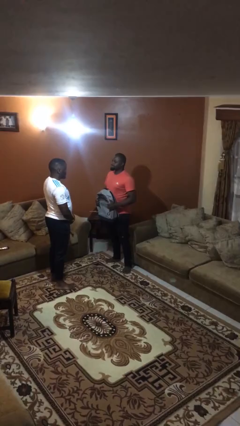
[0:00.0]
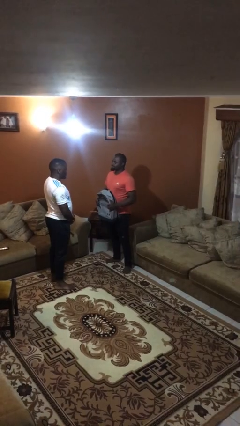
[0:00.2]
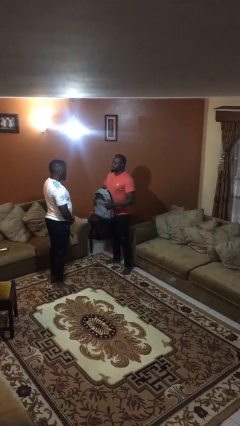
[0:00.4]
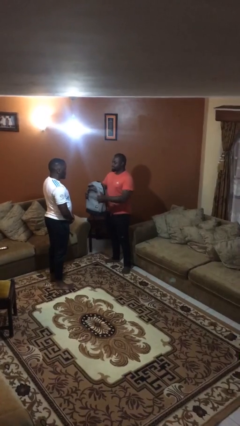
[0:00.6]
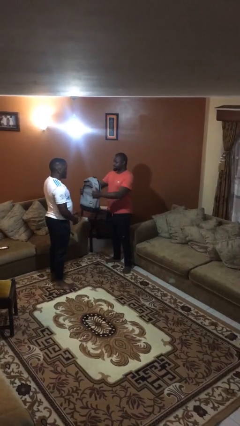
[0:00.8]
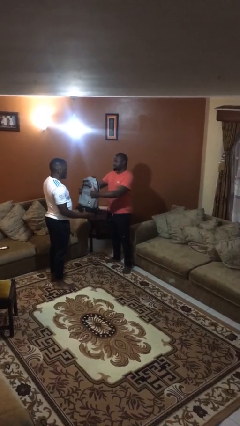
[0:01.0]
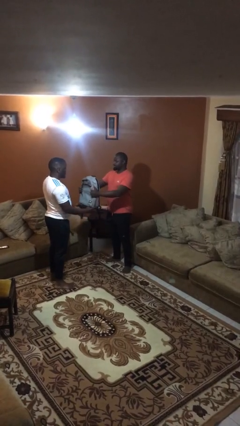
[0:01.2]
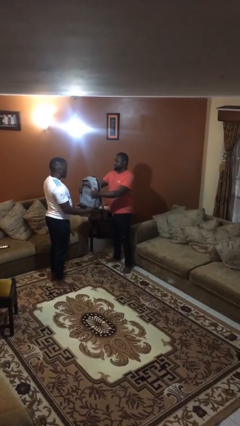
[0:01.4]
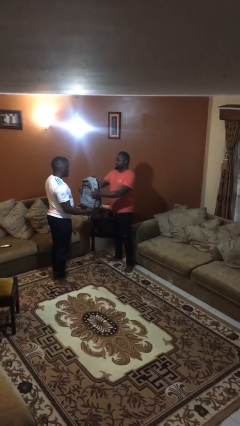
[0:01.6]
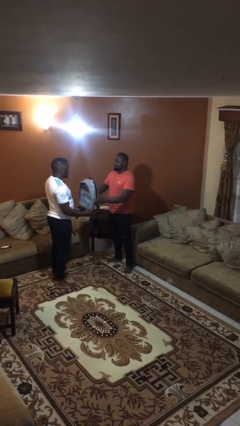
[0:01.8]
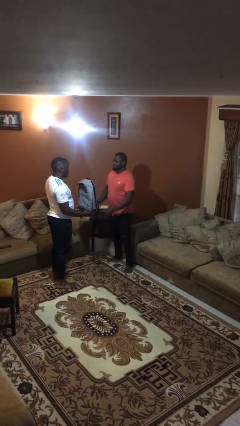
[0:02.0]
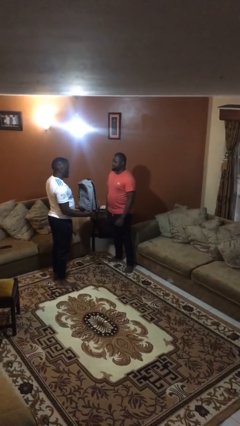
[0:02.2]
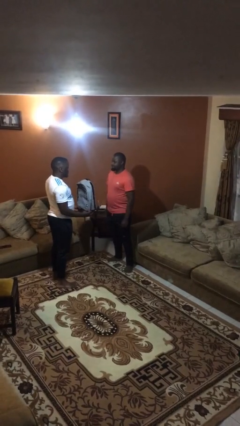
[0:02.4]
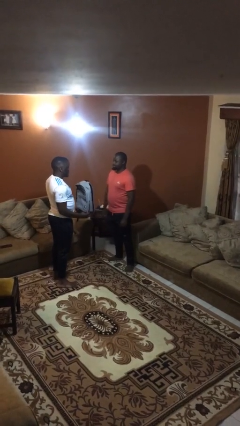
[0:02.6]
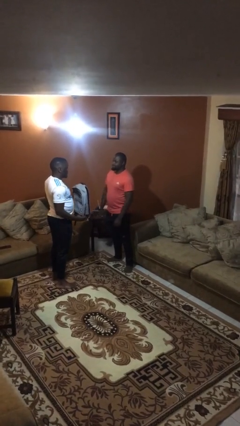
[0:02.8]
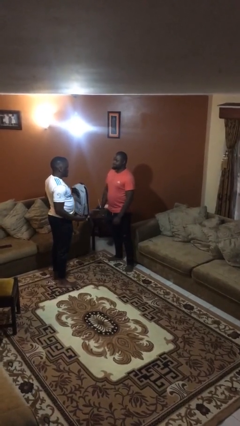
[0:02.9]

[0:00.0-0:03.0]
person transfers object to person

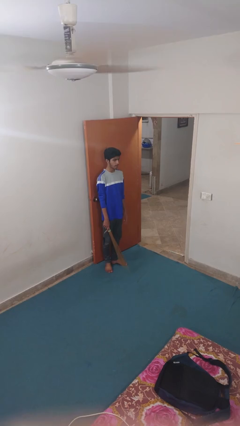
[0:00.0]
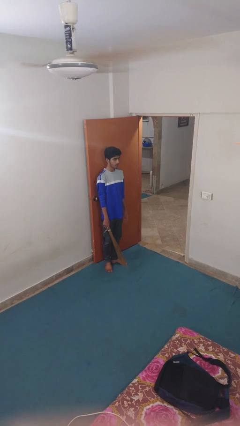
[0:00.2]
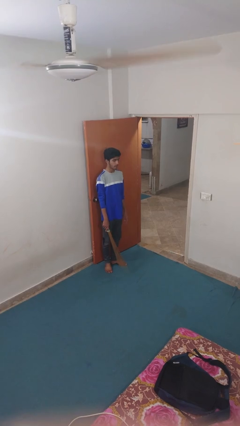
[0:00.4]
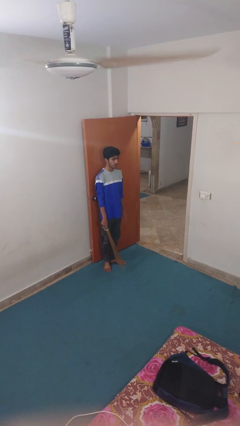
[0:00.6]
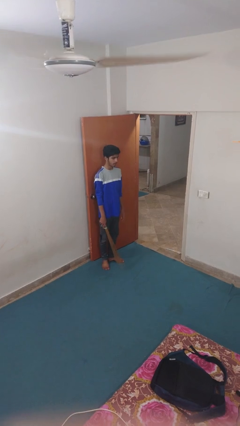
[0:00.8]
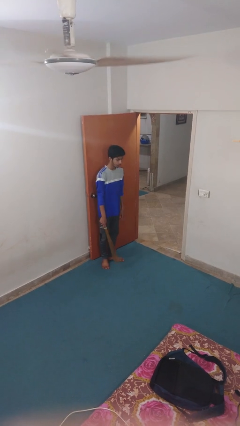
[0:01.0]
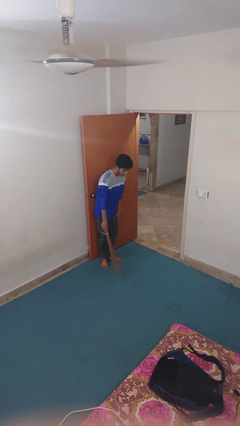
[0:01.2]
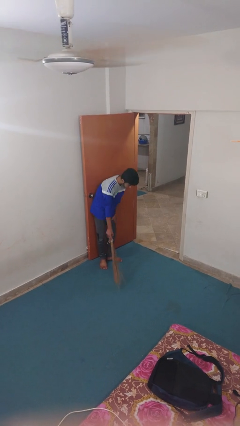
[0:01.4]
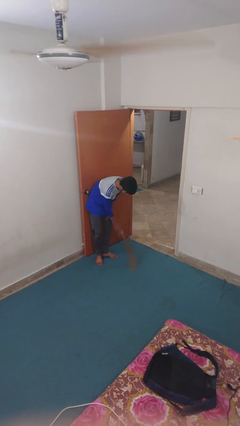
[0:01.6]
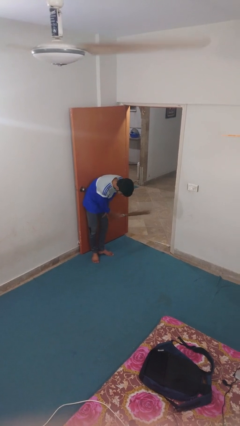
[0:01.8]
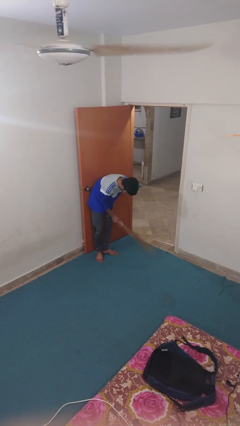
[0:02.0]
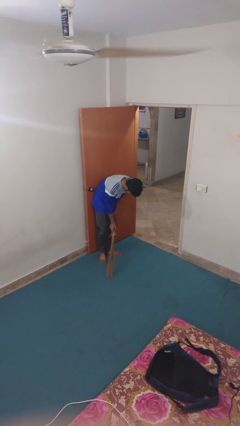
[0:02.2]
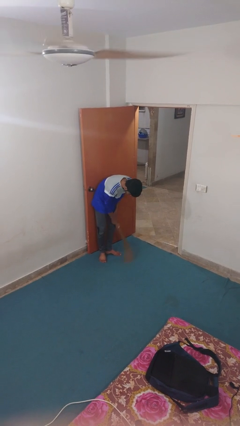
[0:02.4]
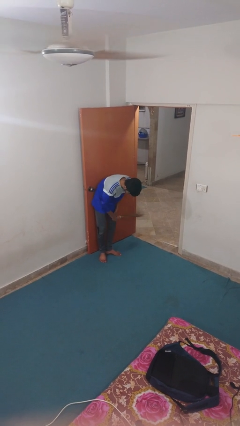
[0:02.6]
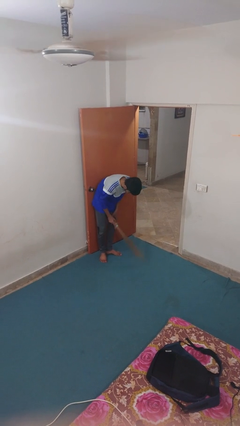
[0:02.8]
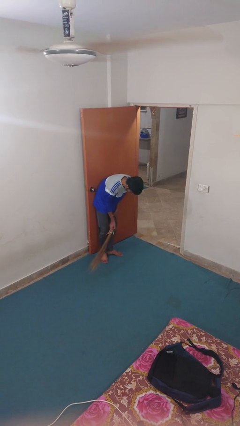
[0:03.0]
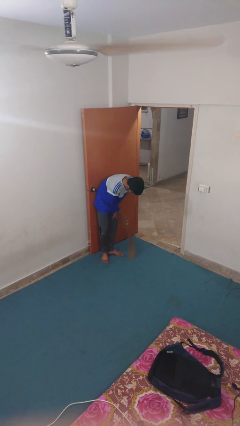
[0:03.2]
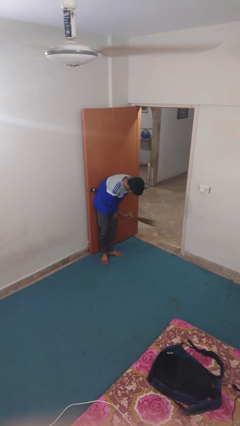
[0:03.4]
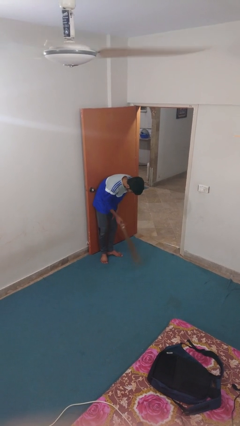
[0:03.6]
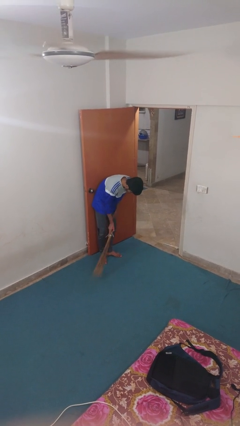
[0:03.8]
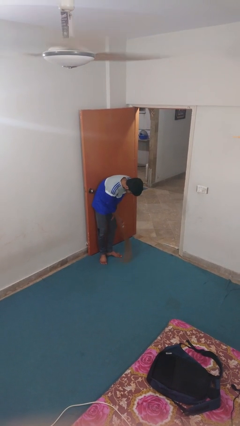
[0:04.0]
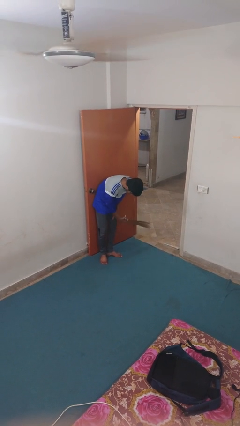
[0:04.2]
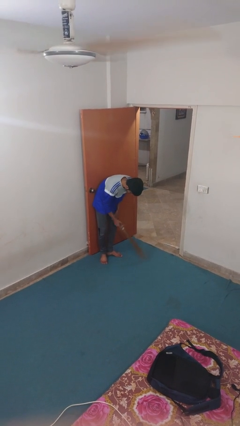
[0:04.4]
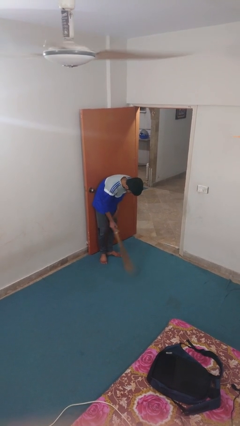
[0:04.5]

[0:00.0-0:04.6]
person sweeps floor

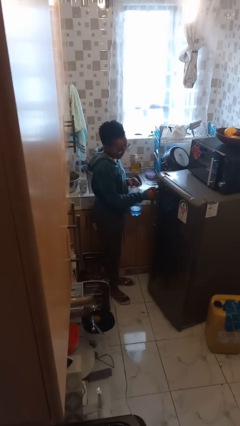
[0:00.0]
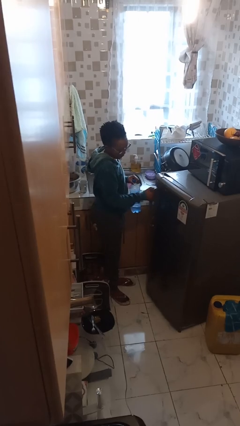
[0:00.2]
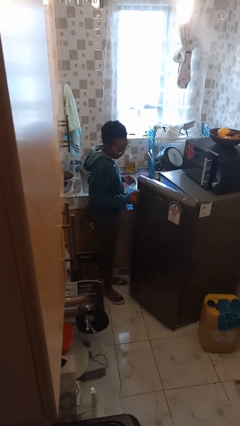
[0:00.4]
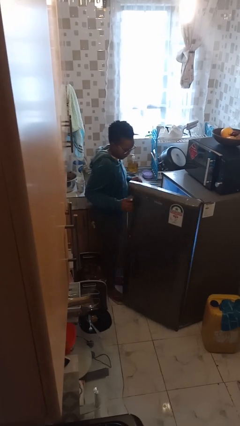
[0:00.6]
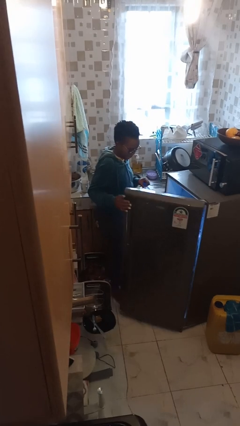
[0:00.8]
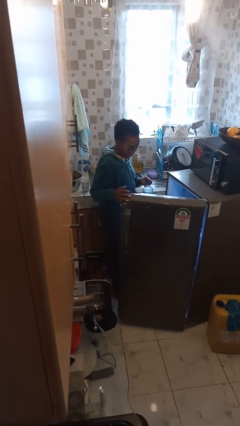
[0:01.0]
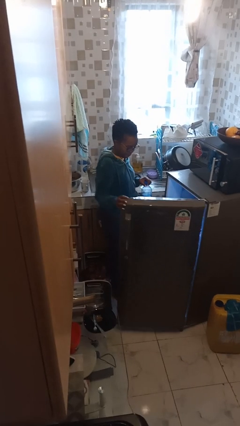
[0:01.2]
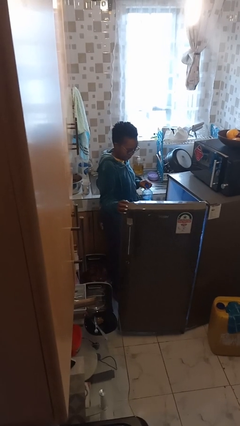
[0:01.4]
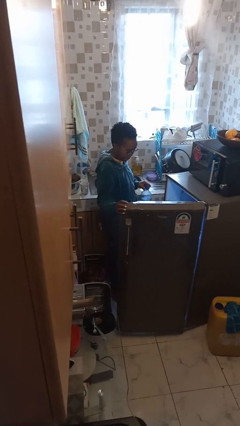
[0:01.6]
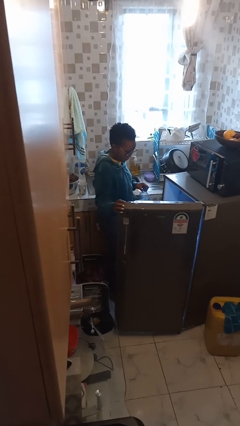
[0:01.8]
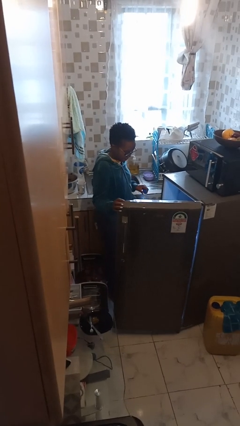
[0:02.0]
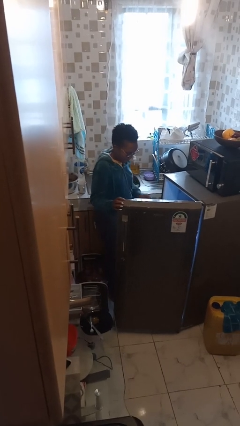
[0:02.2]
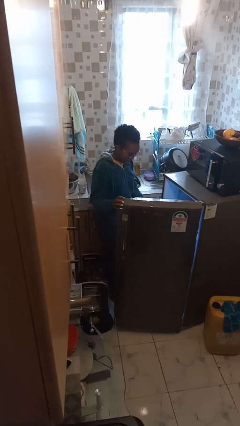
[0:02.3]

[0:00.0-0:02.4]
person opens refrigerator

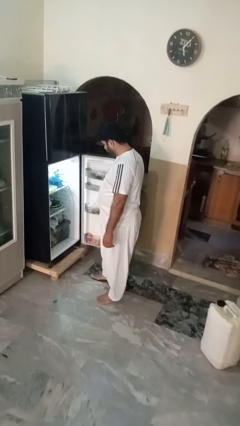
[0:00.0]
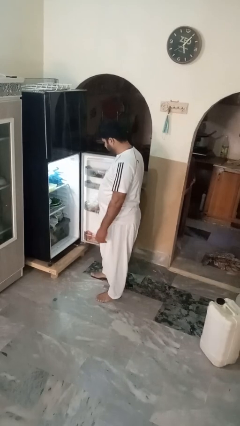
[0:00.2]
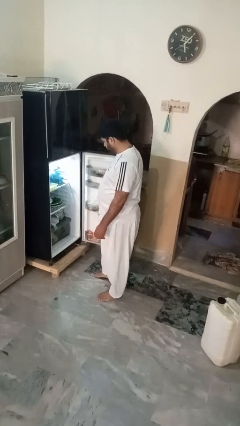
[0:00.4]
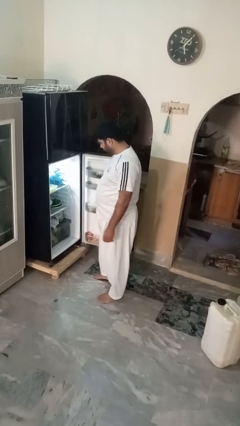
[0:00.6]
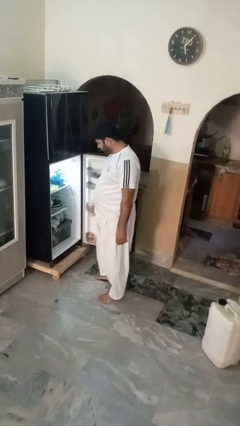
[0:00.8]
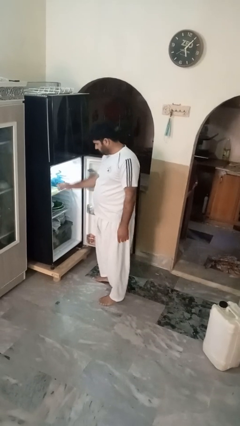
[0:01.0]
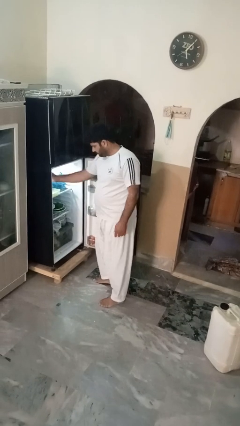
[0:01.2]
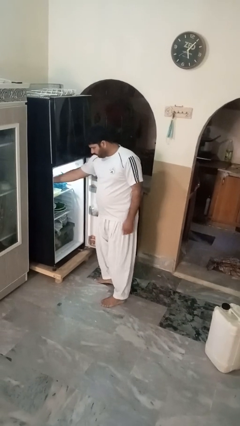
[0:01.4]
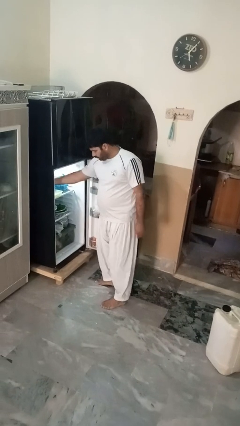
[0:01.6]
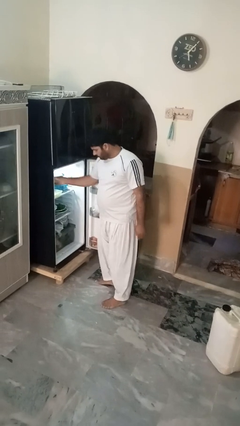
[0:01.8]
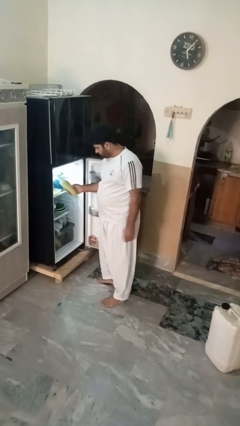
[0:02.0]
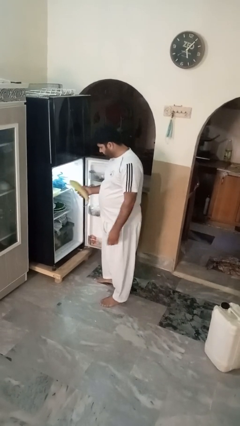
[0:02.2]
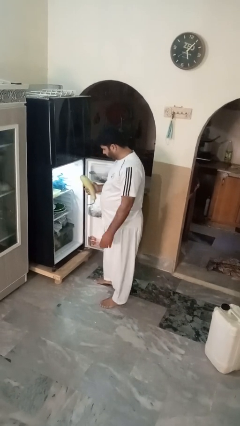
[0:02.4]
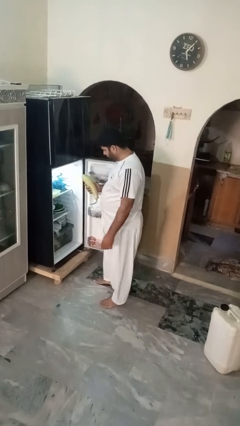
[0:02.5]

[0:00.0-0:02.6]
person takes object from refrigerator

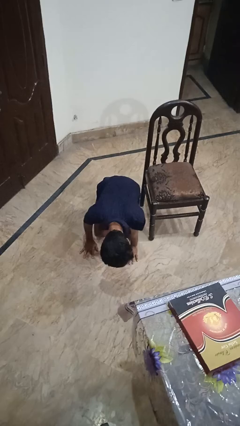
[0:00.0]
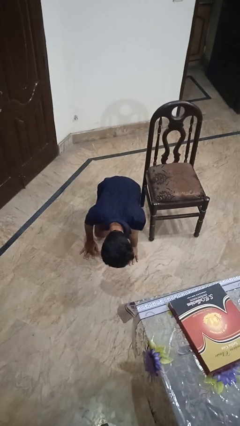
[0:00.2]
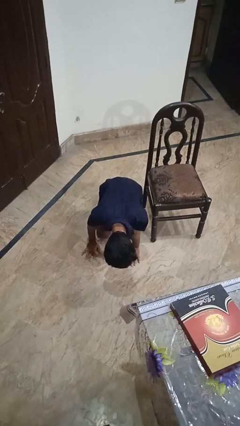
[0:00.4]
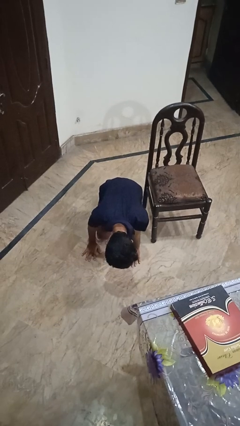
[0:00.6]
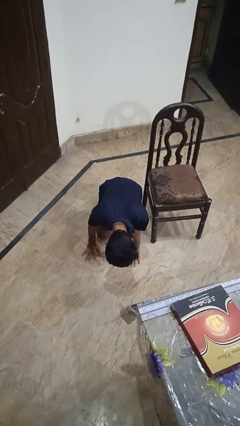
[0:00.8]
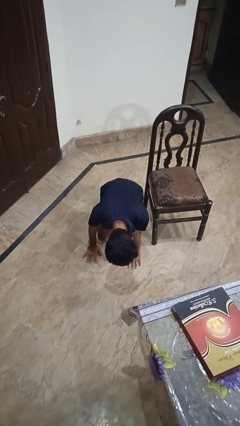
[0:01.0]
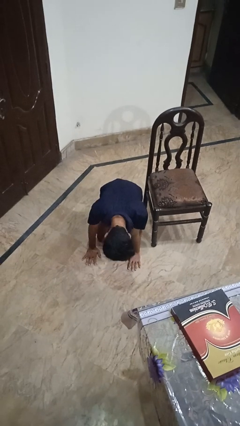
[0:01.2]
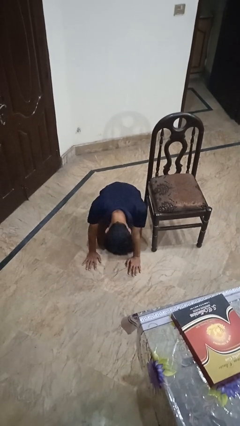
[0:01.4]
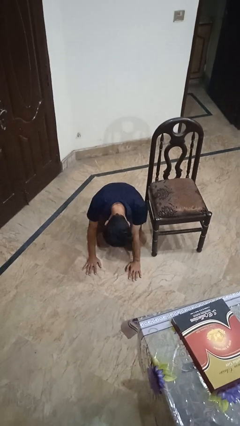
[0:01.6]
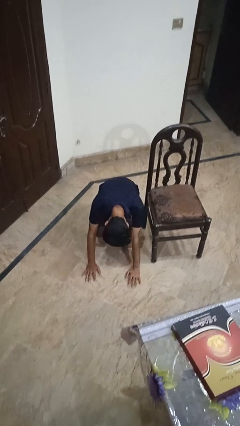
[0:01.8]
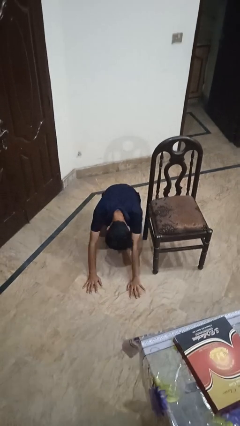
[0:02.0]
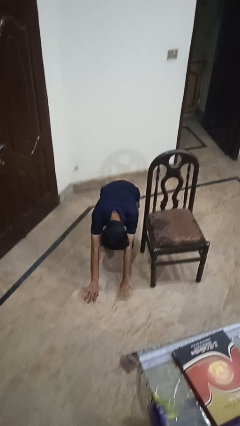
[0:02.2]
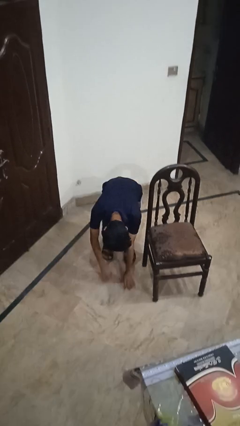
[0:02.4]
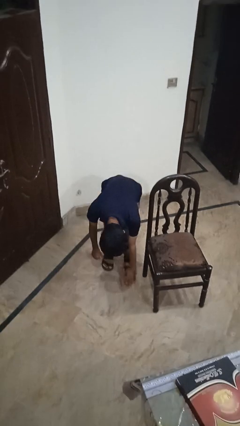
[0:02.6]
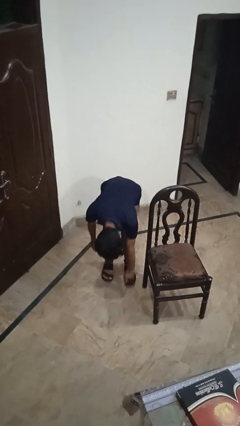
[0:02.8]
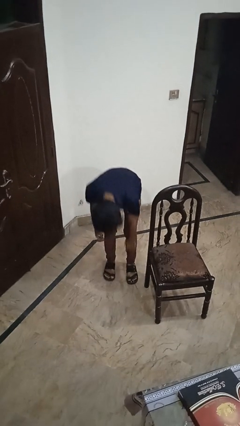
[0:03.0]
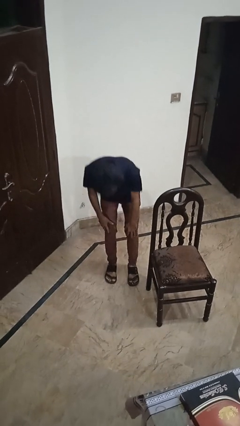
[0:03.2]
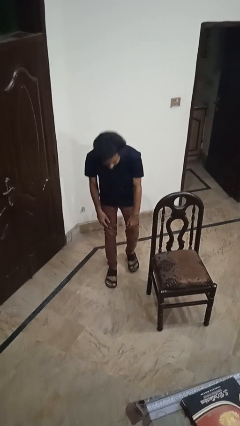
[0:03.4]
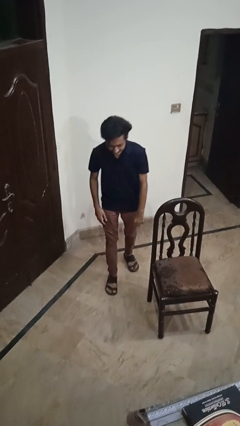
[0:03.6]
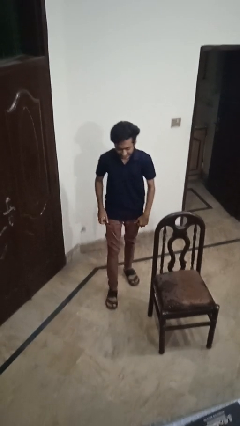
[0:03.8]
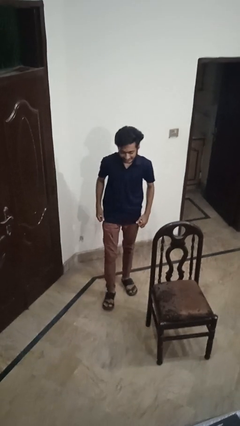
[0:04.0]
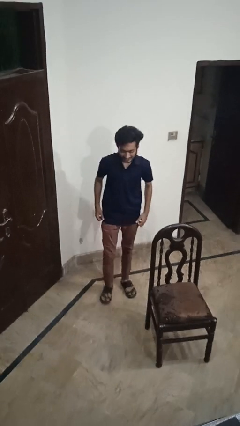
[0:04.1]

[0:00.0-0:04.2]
person stands up from floor

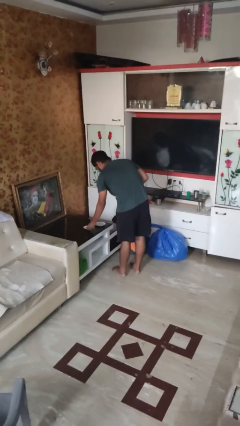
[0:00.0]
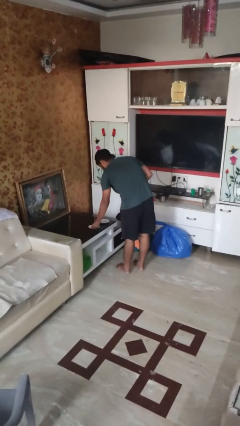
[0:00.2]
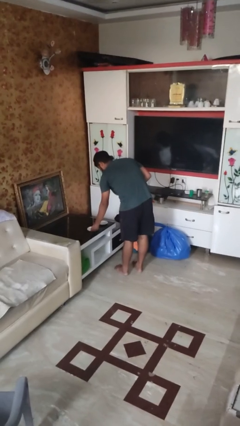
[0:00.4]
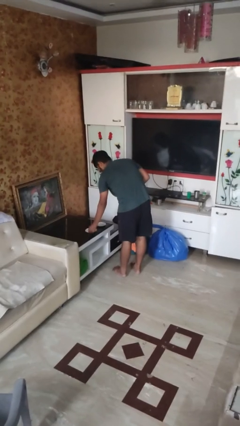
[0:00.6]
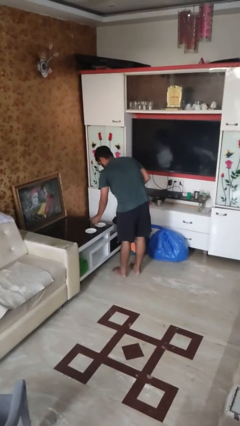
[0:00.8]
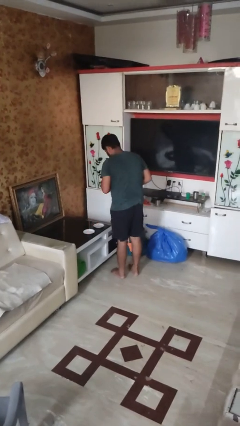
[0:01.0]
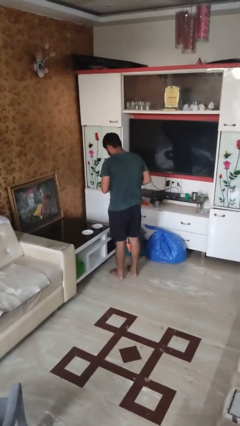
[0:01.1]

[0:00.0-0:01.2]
person sets table
